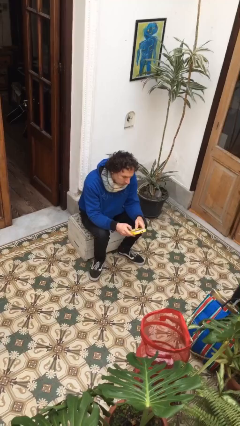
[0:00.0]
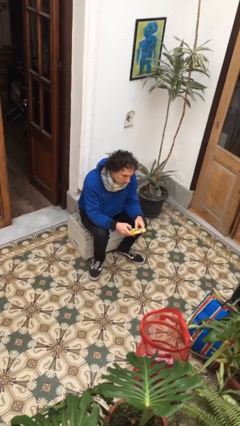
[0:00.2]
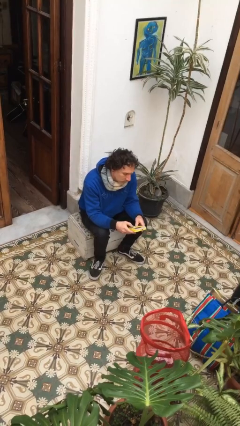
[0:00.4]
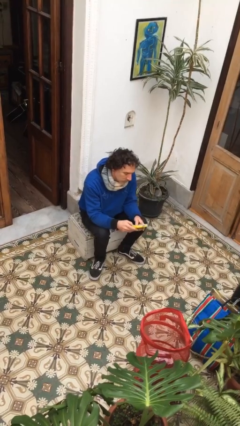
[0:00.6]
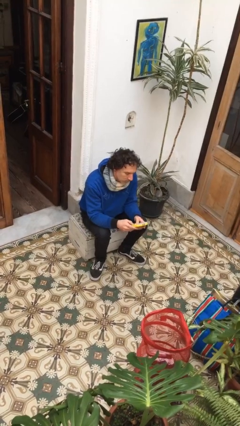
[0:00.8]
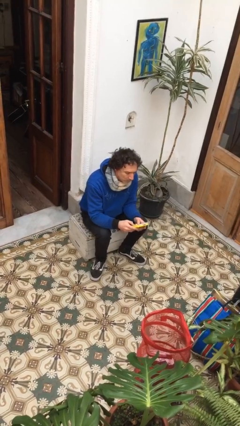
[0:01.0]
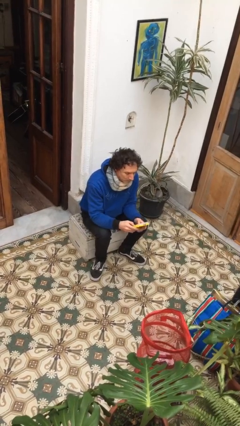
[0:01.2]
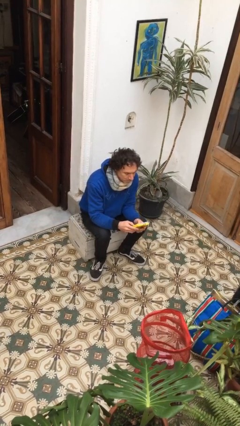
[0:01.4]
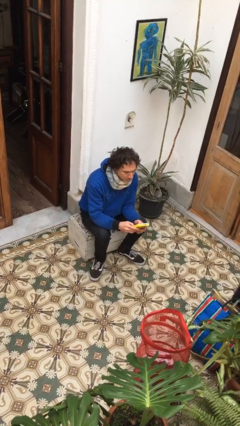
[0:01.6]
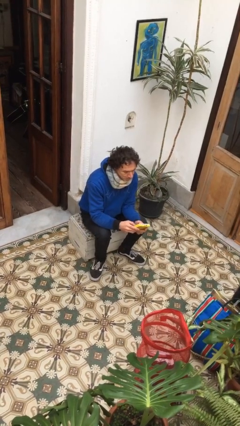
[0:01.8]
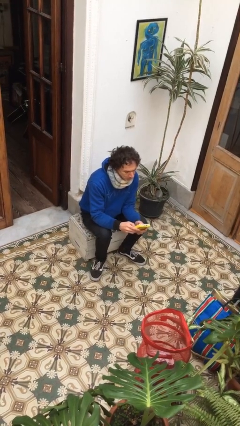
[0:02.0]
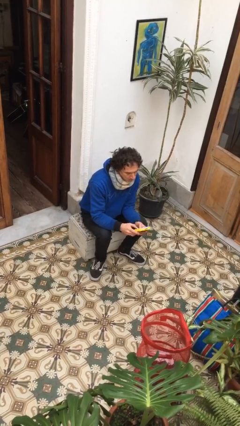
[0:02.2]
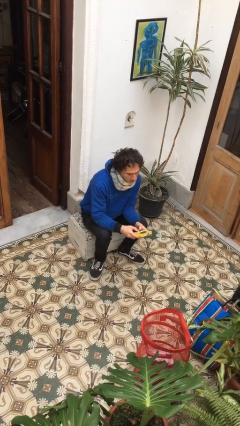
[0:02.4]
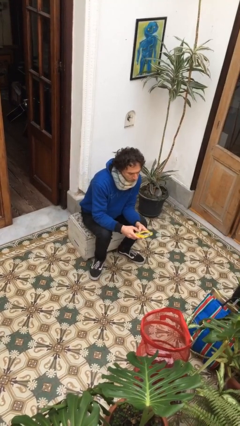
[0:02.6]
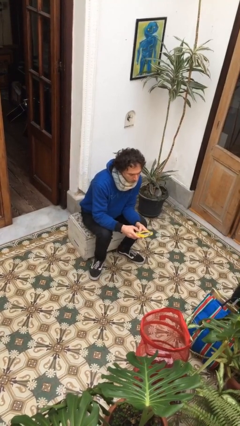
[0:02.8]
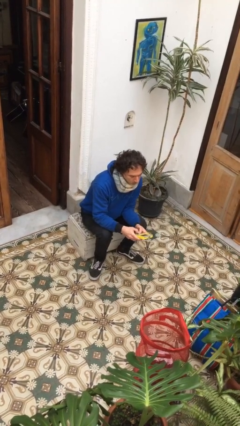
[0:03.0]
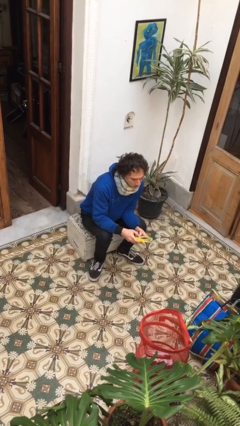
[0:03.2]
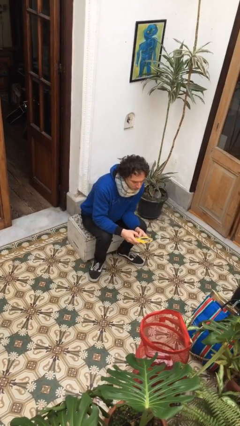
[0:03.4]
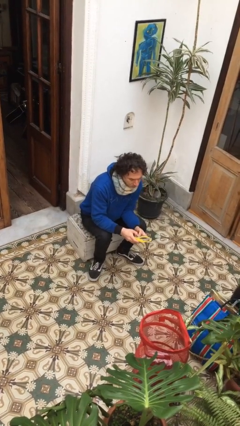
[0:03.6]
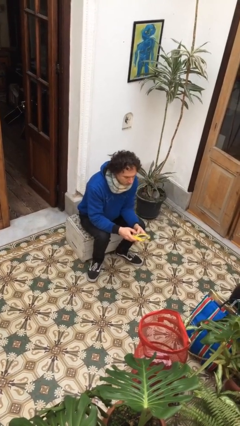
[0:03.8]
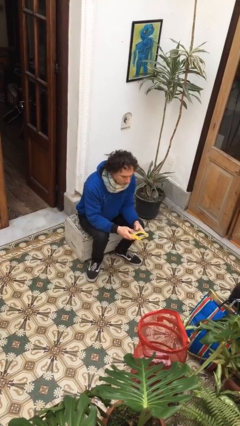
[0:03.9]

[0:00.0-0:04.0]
person interacts with handheld game

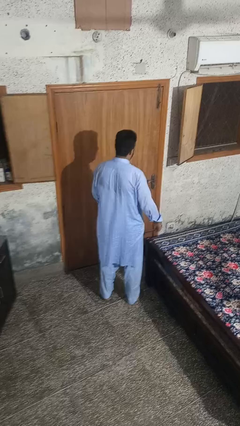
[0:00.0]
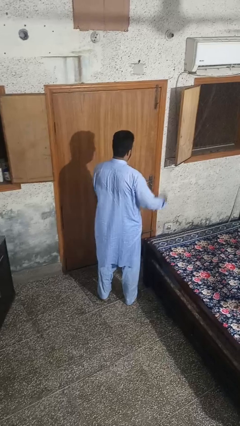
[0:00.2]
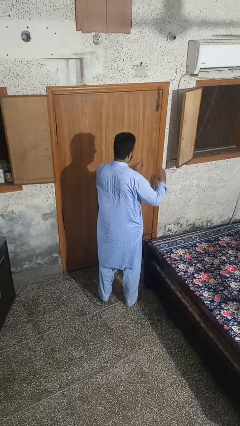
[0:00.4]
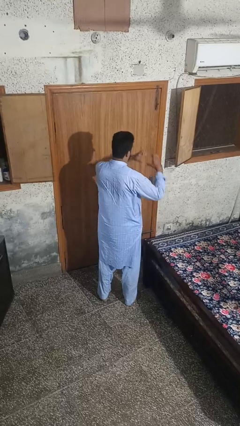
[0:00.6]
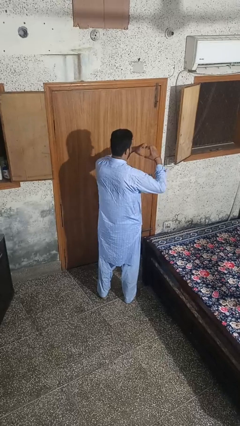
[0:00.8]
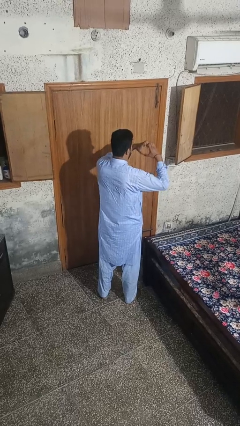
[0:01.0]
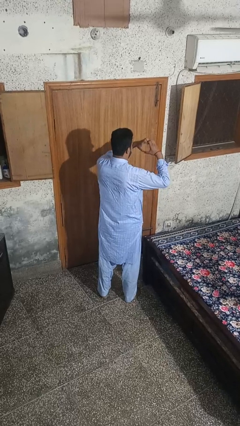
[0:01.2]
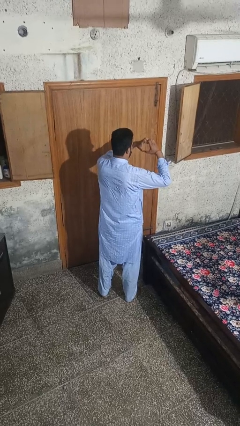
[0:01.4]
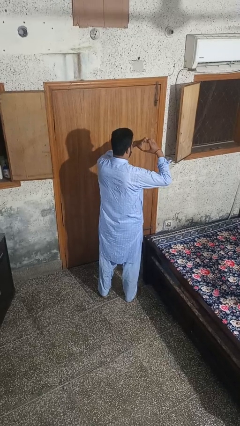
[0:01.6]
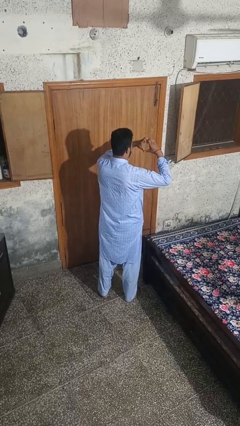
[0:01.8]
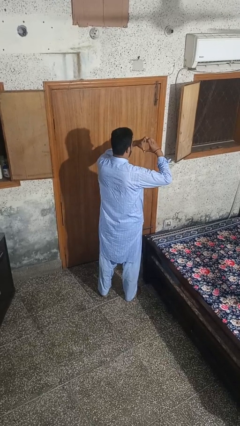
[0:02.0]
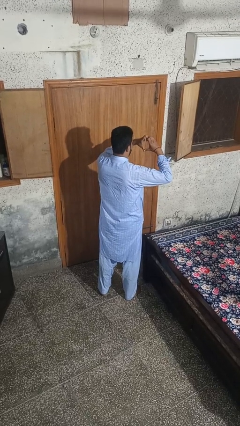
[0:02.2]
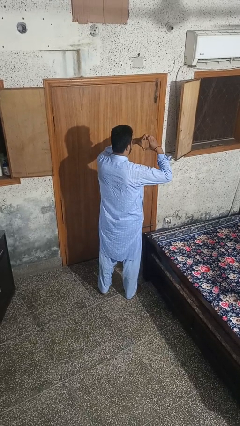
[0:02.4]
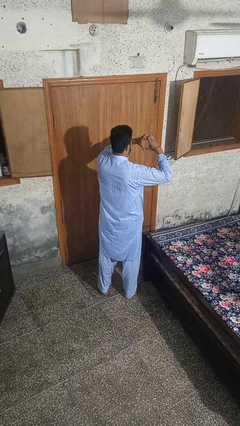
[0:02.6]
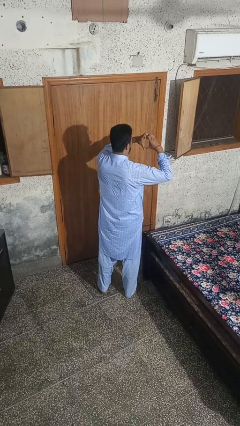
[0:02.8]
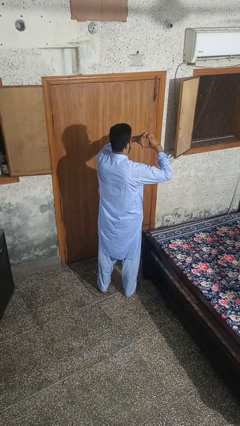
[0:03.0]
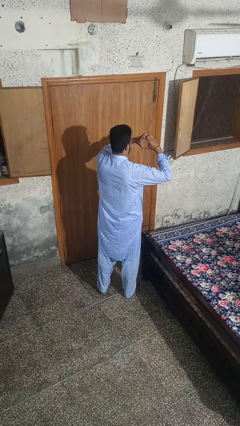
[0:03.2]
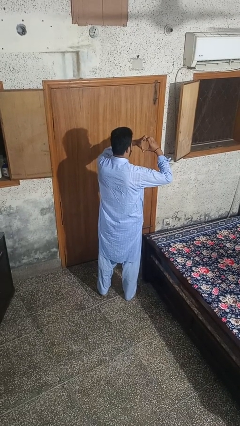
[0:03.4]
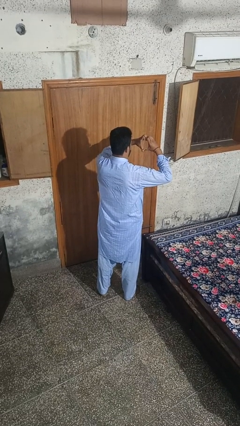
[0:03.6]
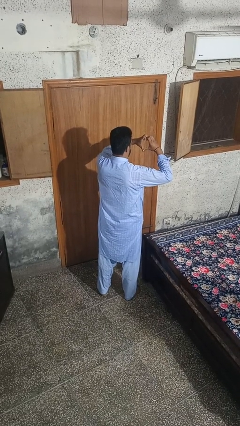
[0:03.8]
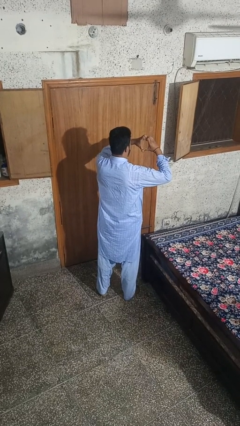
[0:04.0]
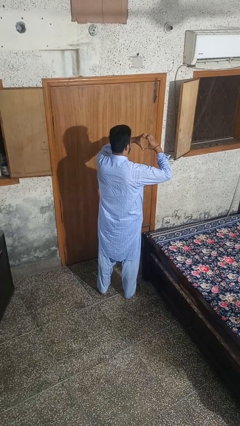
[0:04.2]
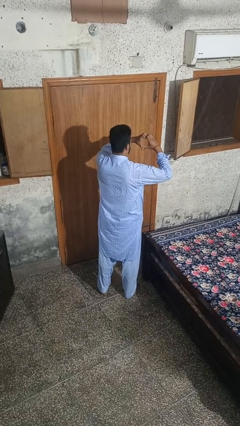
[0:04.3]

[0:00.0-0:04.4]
person gestures heart

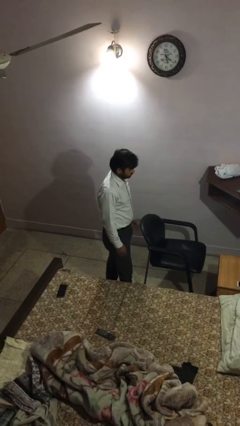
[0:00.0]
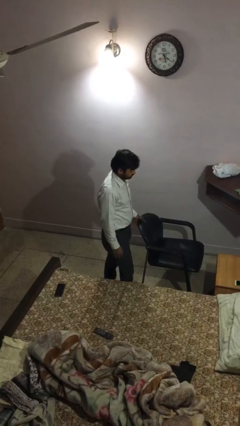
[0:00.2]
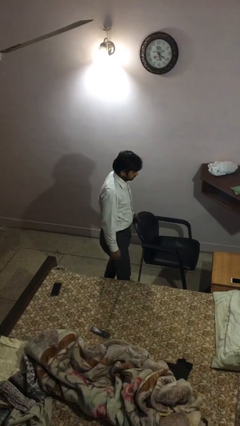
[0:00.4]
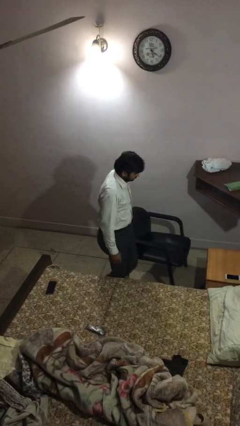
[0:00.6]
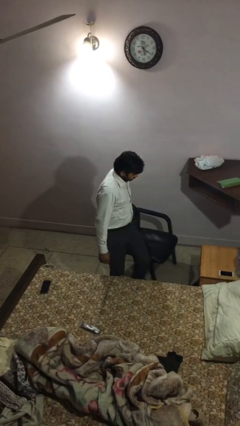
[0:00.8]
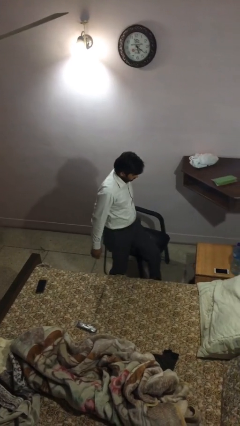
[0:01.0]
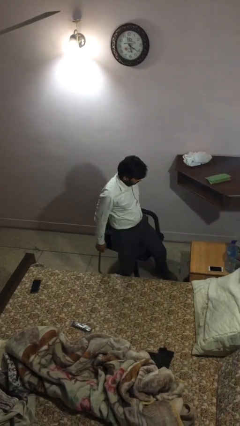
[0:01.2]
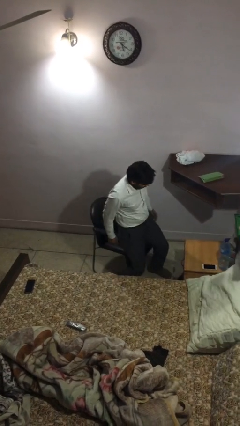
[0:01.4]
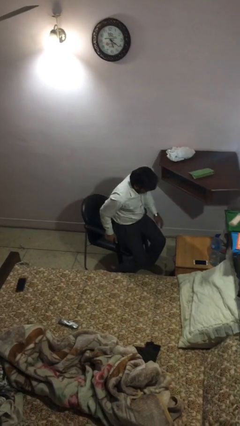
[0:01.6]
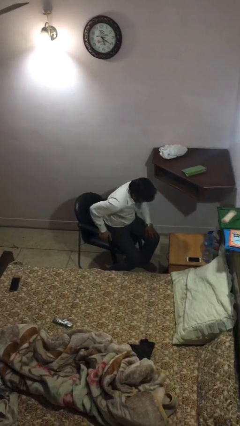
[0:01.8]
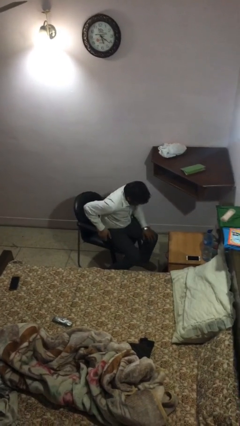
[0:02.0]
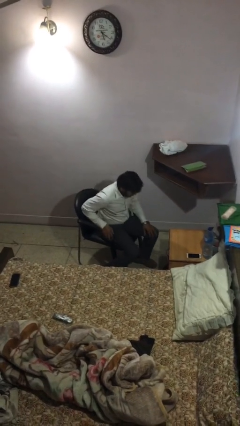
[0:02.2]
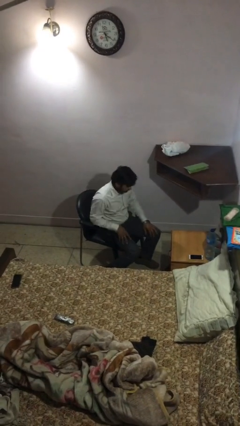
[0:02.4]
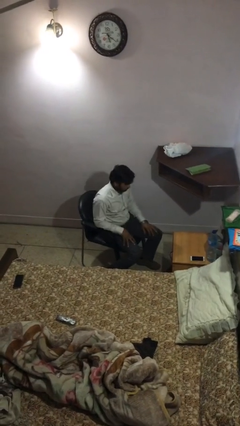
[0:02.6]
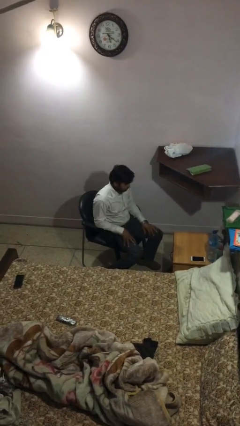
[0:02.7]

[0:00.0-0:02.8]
person sits down

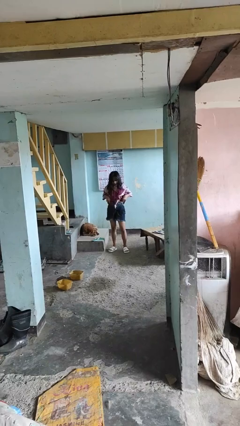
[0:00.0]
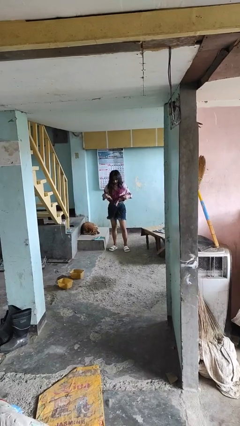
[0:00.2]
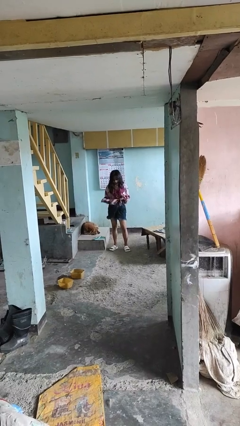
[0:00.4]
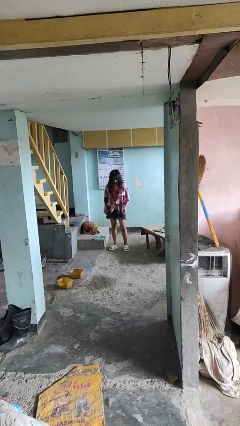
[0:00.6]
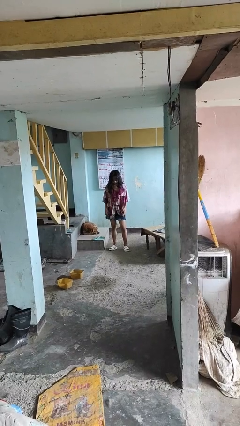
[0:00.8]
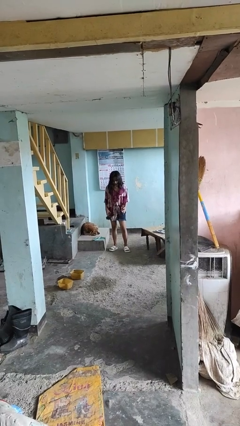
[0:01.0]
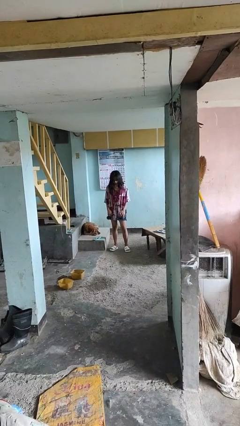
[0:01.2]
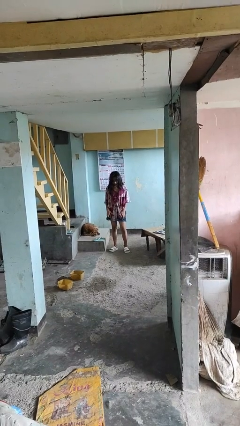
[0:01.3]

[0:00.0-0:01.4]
person untucks shirt

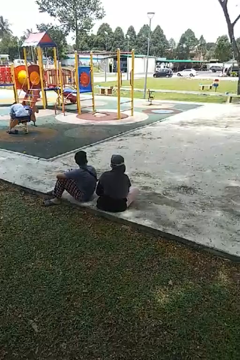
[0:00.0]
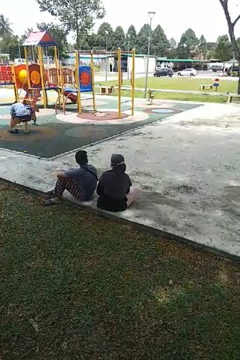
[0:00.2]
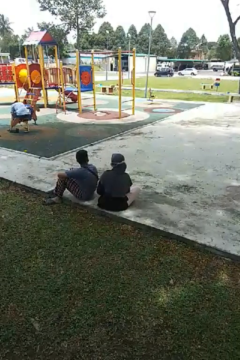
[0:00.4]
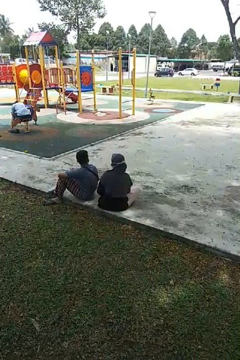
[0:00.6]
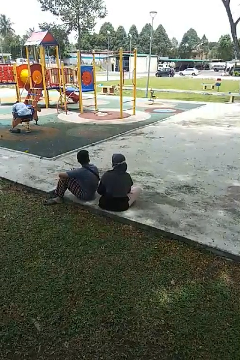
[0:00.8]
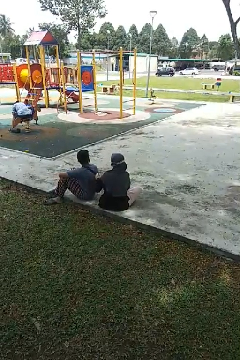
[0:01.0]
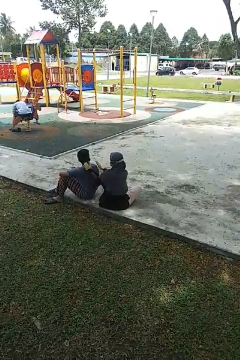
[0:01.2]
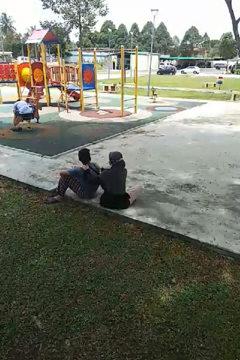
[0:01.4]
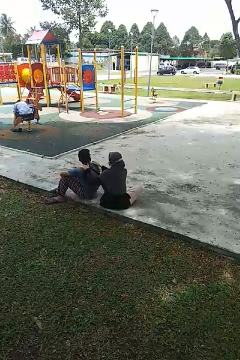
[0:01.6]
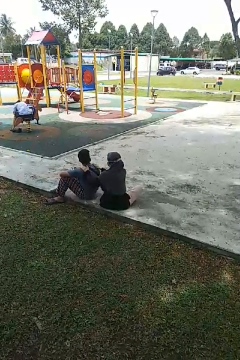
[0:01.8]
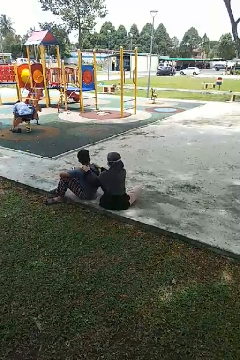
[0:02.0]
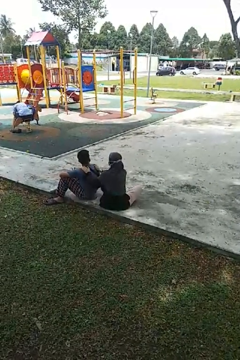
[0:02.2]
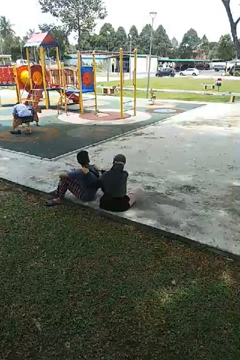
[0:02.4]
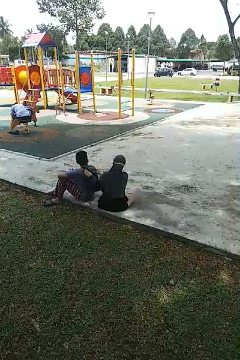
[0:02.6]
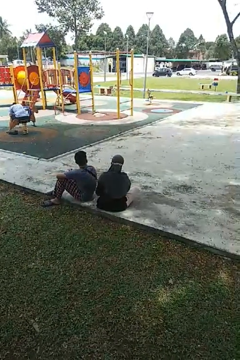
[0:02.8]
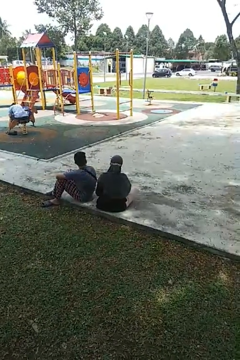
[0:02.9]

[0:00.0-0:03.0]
person pounds shoulders of person

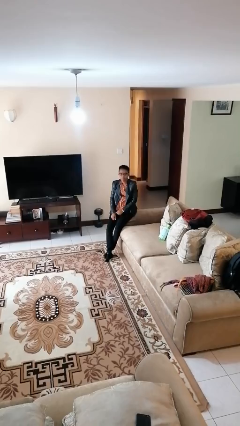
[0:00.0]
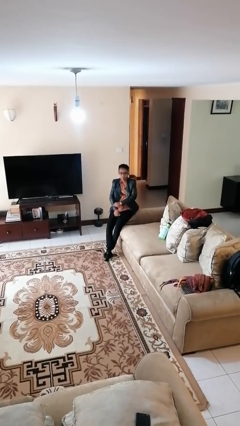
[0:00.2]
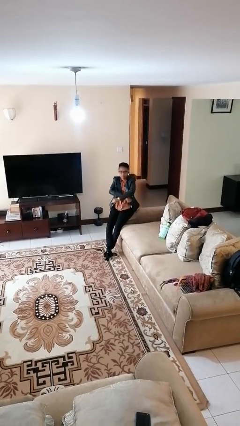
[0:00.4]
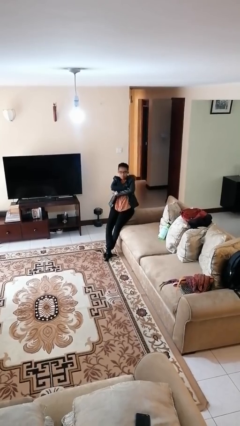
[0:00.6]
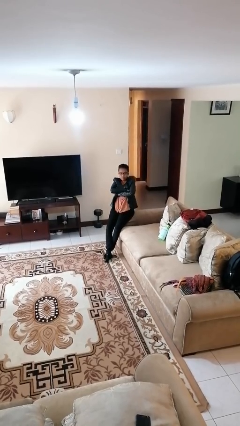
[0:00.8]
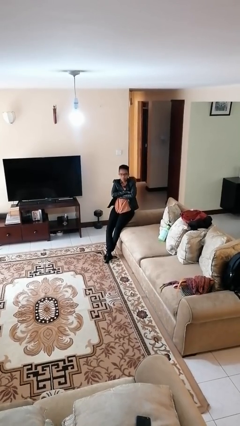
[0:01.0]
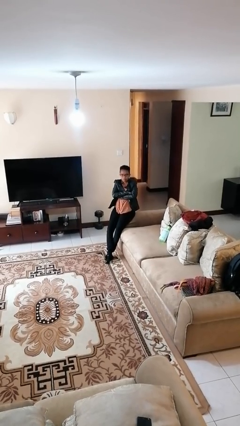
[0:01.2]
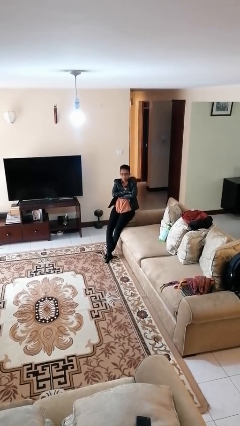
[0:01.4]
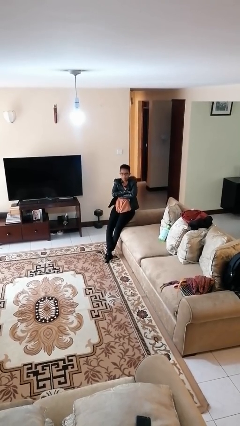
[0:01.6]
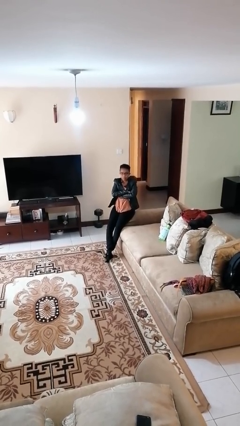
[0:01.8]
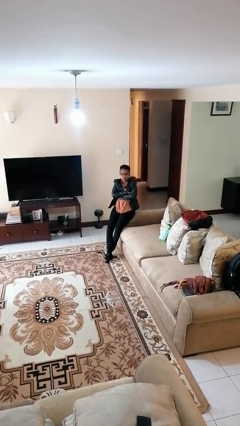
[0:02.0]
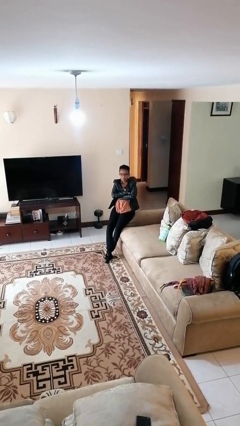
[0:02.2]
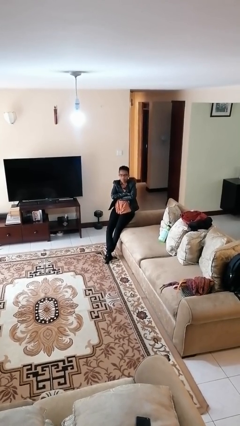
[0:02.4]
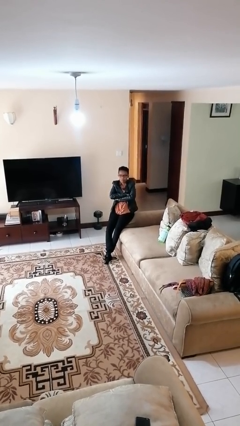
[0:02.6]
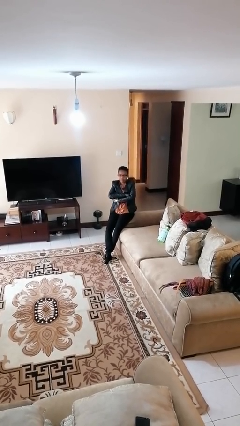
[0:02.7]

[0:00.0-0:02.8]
person crosses arms
